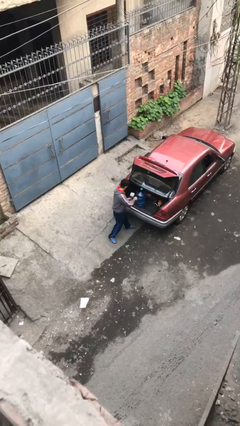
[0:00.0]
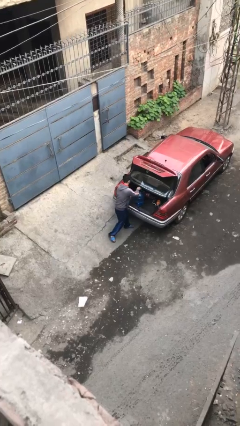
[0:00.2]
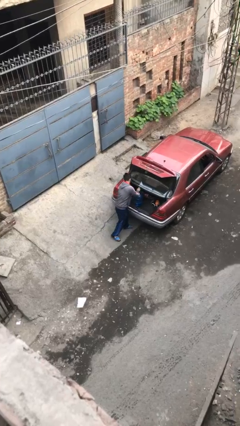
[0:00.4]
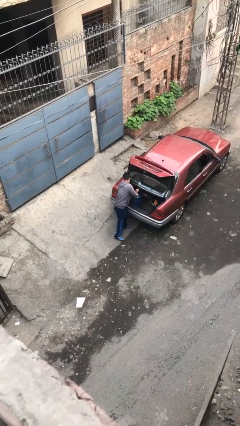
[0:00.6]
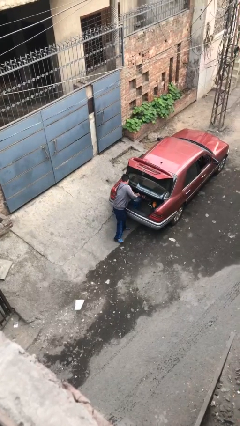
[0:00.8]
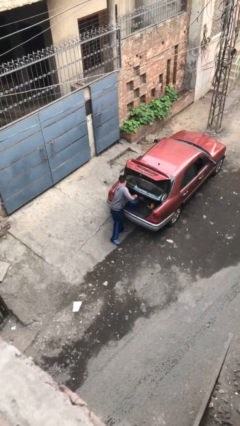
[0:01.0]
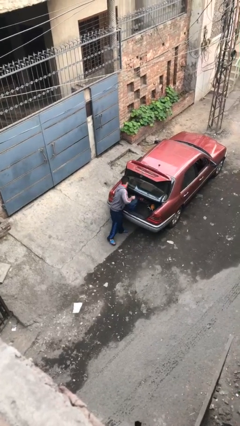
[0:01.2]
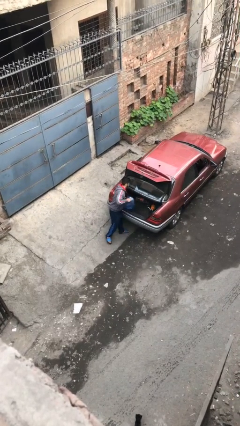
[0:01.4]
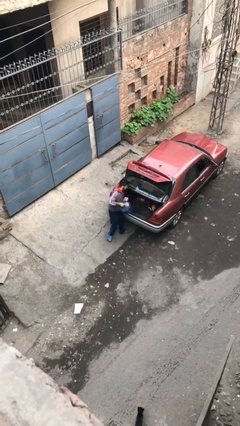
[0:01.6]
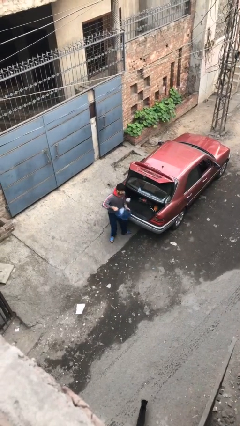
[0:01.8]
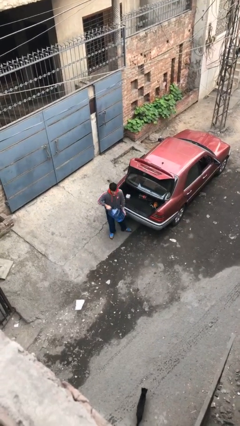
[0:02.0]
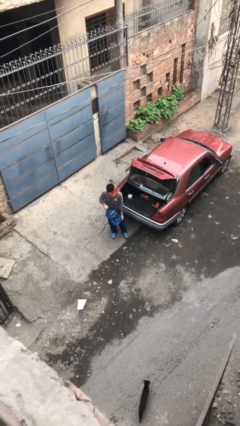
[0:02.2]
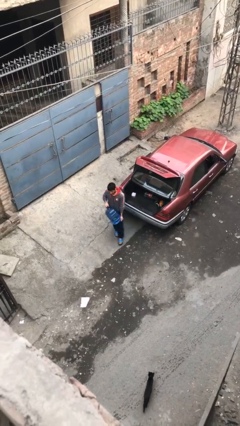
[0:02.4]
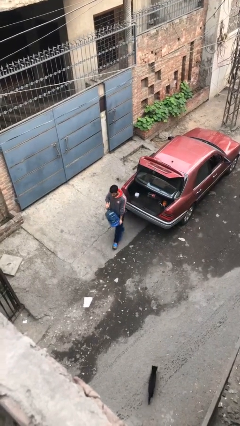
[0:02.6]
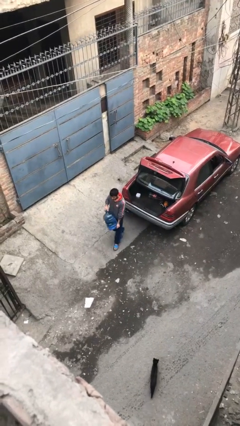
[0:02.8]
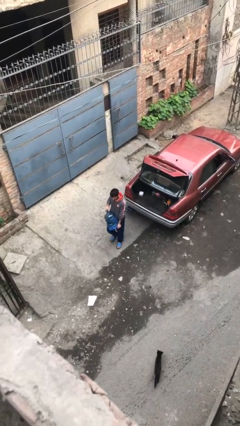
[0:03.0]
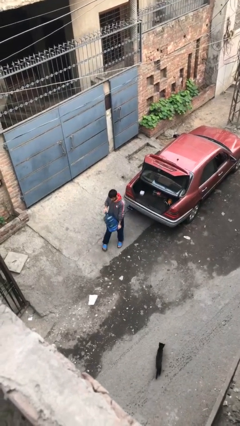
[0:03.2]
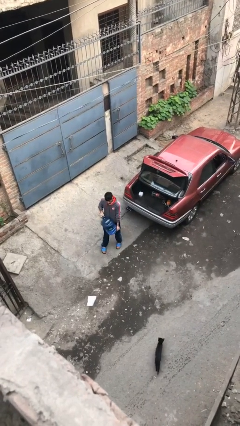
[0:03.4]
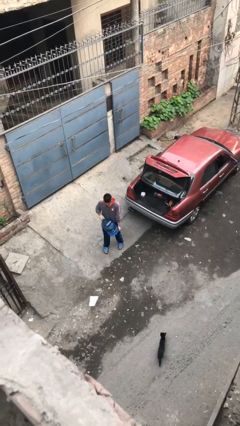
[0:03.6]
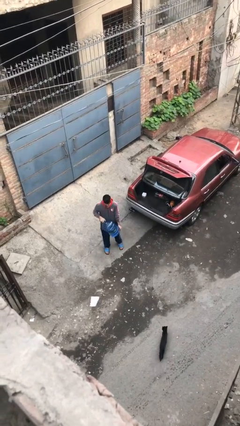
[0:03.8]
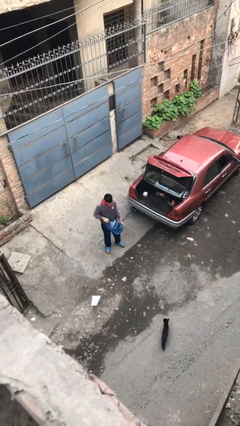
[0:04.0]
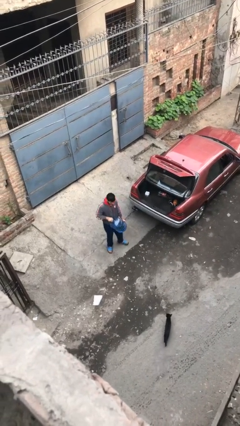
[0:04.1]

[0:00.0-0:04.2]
person unloads car

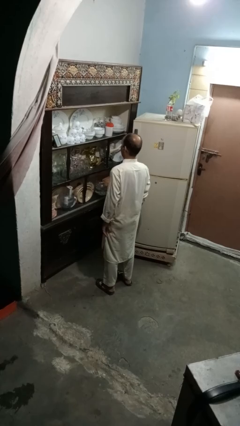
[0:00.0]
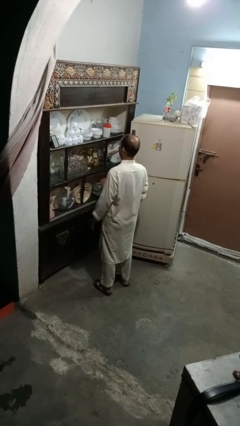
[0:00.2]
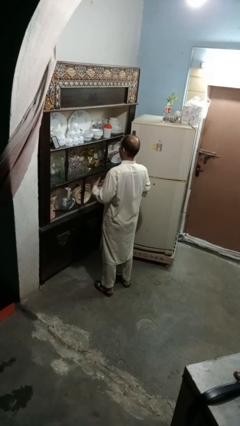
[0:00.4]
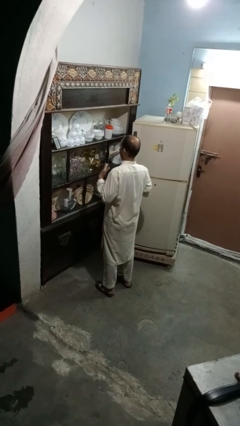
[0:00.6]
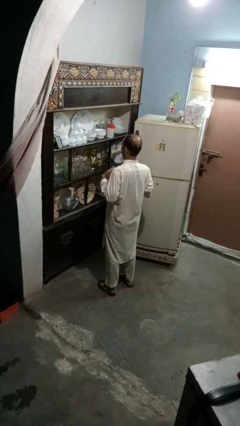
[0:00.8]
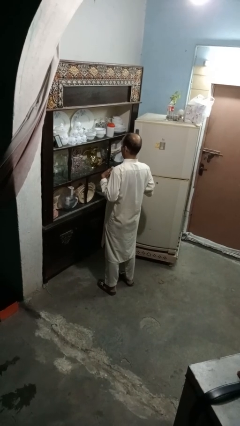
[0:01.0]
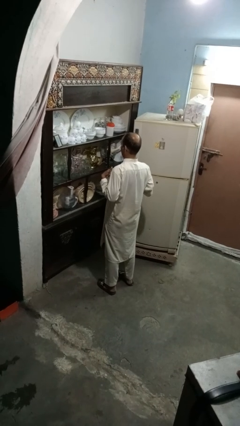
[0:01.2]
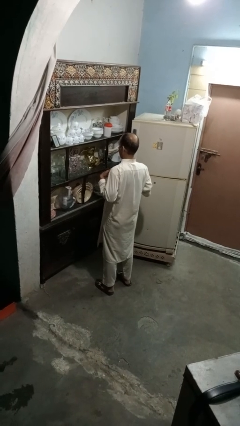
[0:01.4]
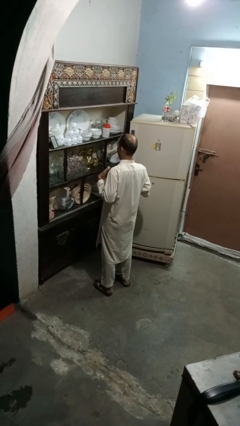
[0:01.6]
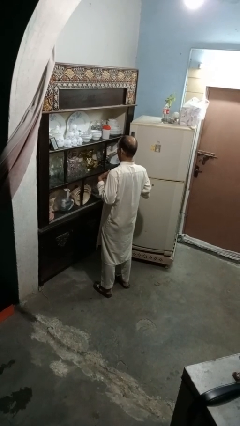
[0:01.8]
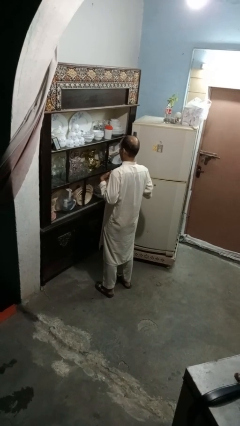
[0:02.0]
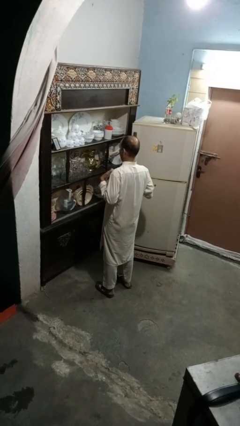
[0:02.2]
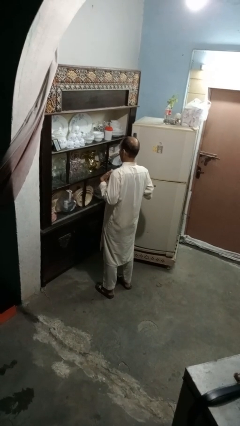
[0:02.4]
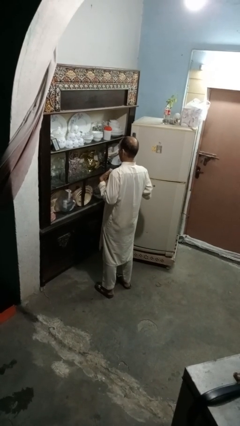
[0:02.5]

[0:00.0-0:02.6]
person drums on chest

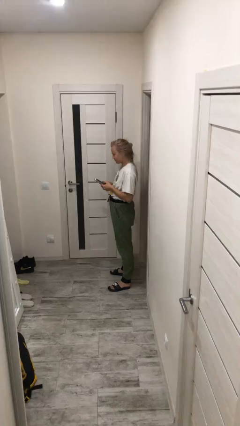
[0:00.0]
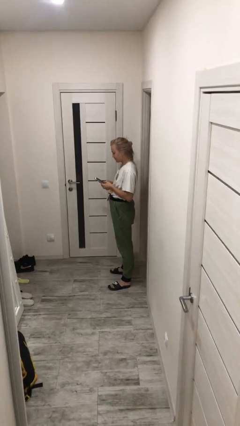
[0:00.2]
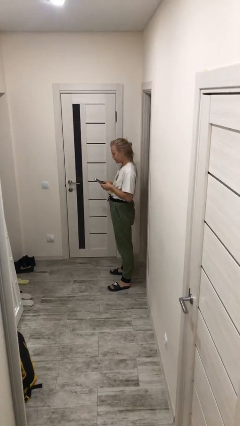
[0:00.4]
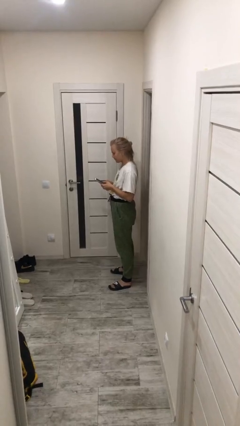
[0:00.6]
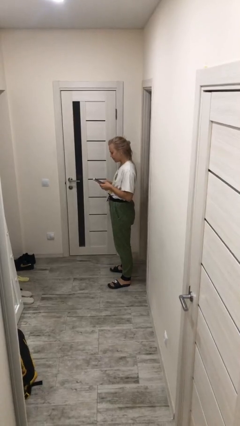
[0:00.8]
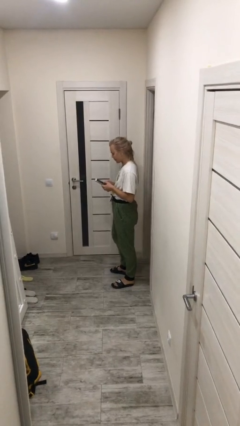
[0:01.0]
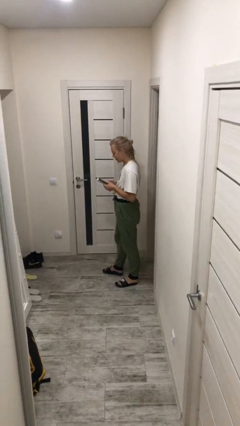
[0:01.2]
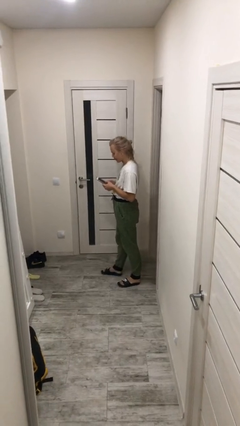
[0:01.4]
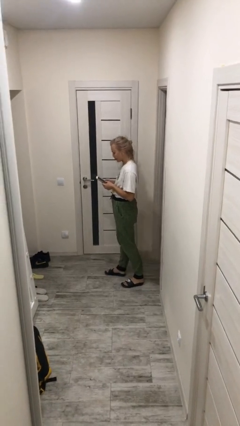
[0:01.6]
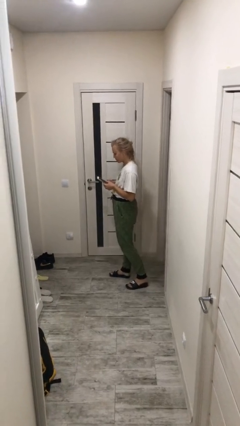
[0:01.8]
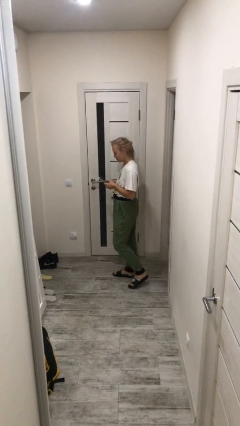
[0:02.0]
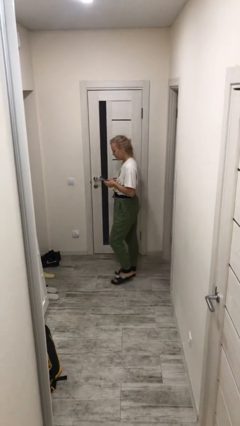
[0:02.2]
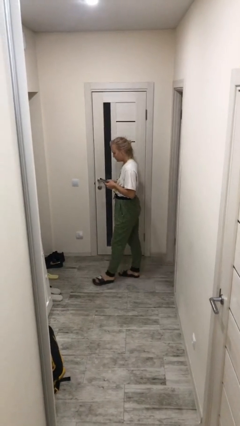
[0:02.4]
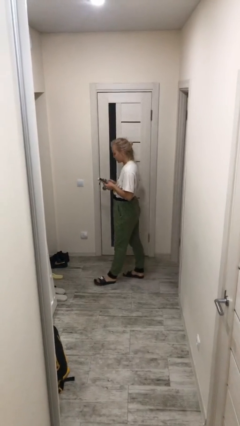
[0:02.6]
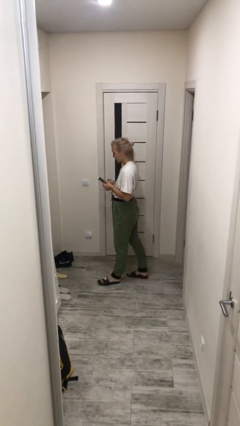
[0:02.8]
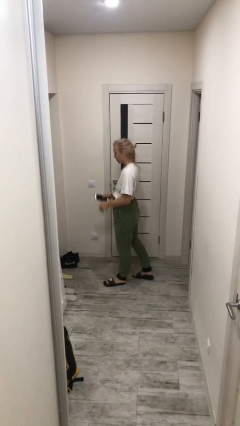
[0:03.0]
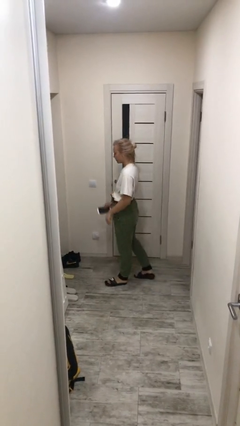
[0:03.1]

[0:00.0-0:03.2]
person texts on phone

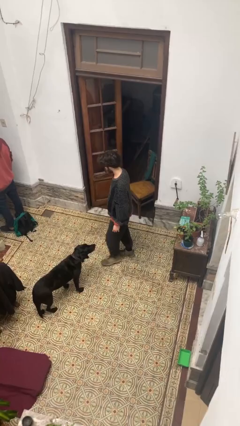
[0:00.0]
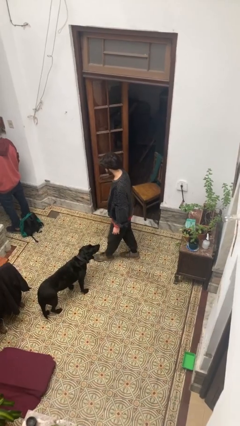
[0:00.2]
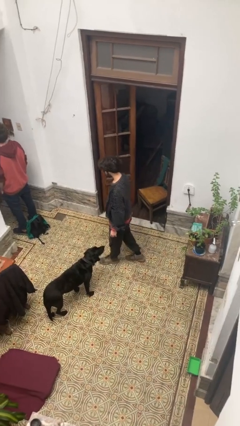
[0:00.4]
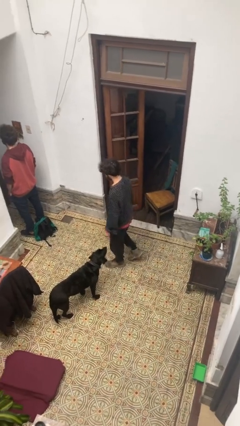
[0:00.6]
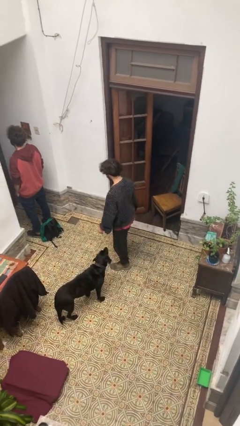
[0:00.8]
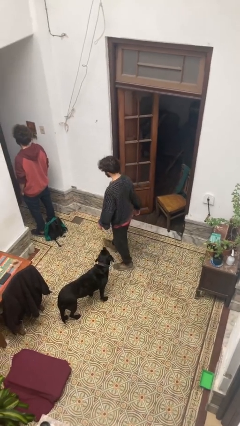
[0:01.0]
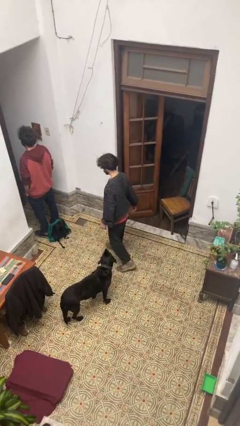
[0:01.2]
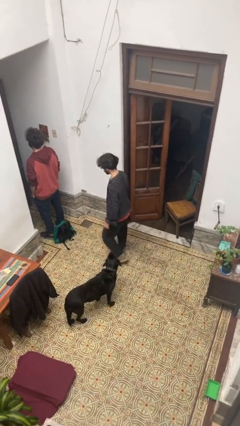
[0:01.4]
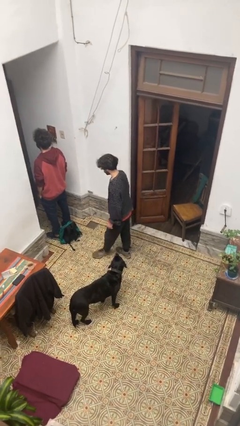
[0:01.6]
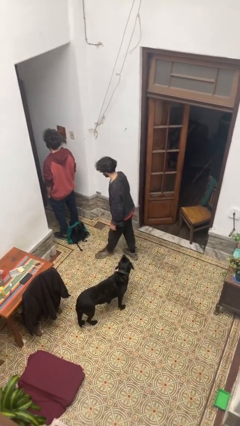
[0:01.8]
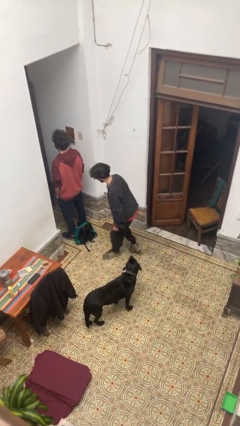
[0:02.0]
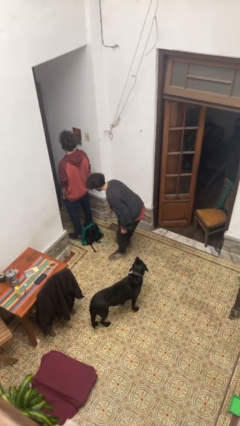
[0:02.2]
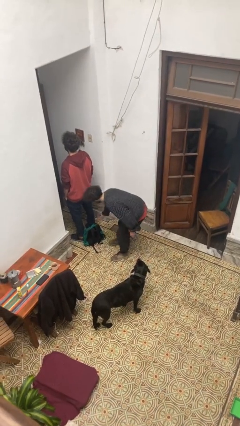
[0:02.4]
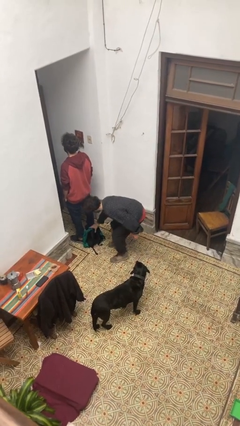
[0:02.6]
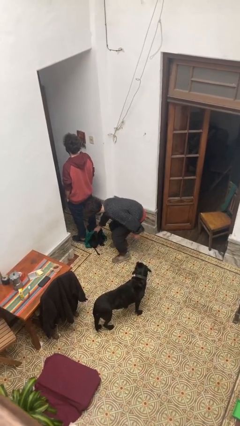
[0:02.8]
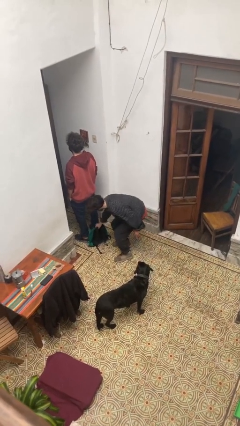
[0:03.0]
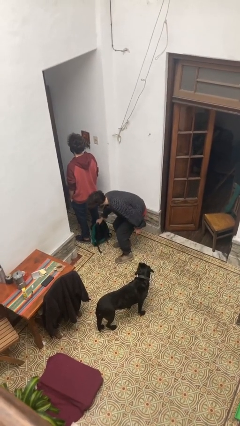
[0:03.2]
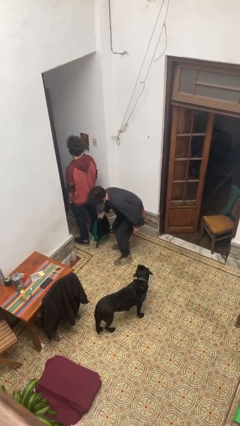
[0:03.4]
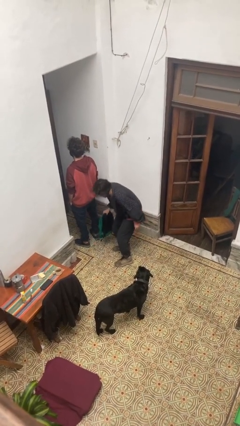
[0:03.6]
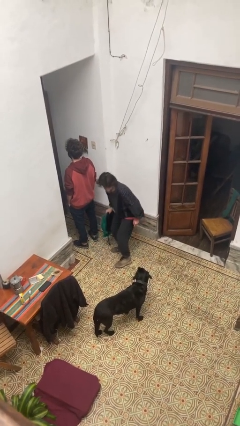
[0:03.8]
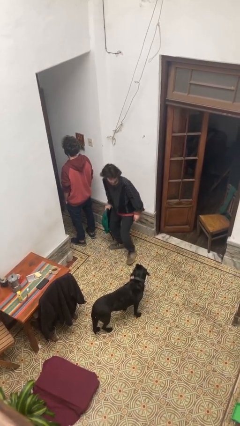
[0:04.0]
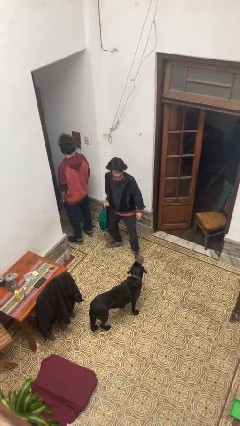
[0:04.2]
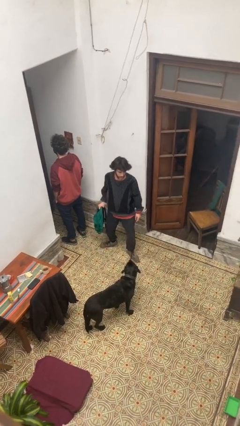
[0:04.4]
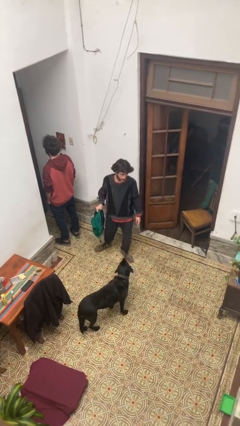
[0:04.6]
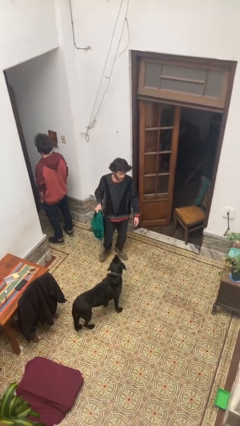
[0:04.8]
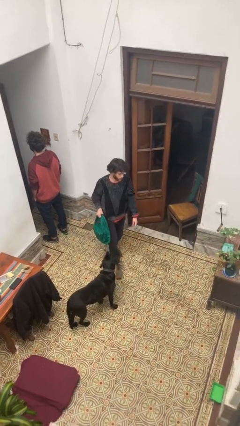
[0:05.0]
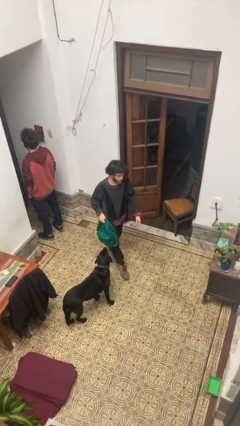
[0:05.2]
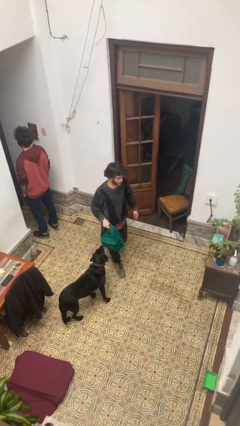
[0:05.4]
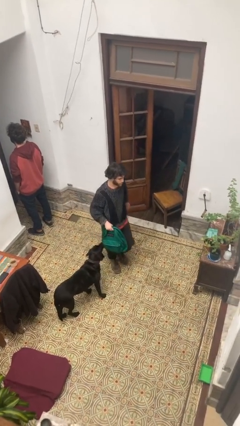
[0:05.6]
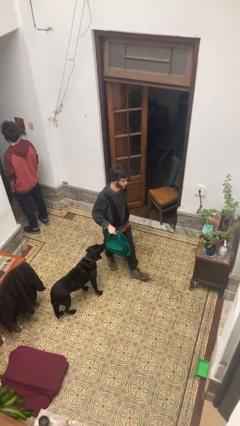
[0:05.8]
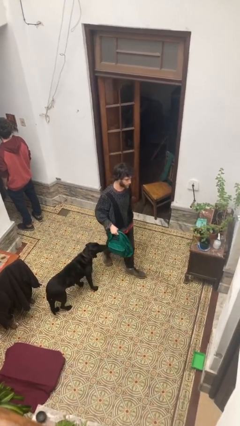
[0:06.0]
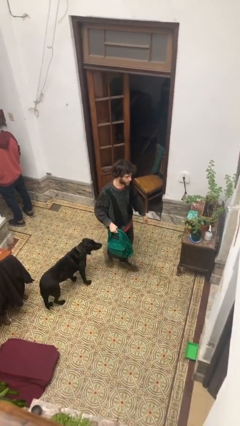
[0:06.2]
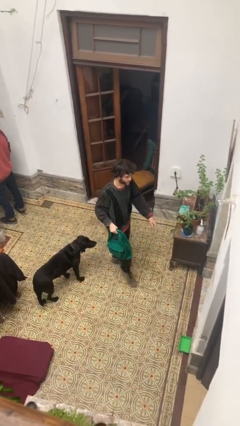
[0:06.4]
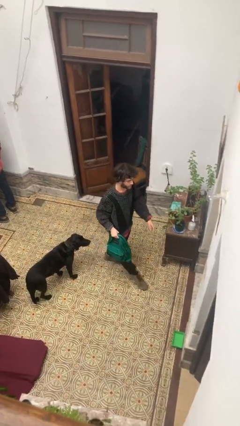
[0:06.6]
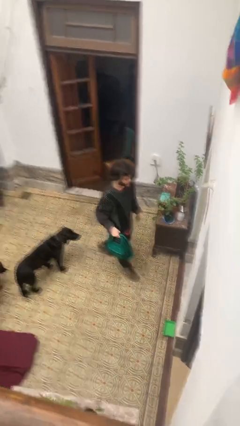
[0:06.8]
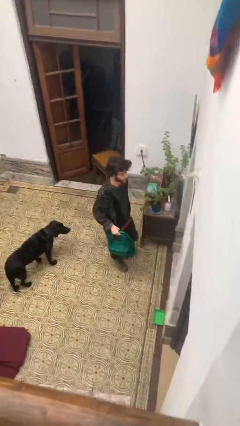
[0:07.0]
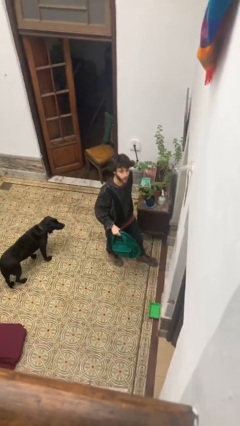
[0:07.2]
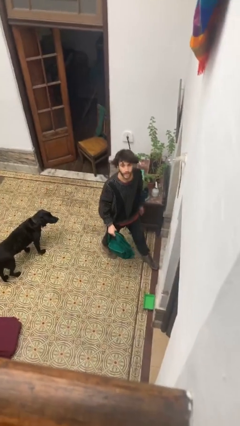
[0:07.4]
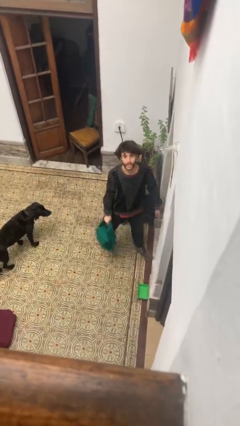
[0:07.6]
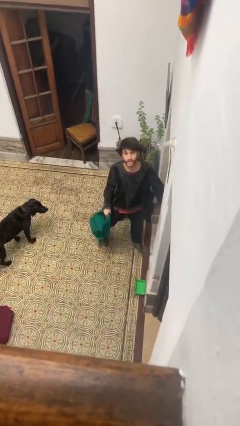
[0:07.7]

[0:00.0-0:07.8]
person steals object from person
